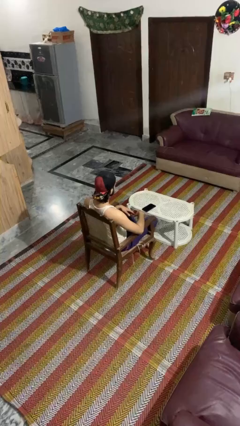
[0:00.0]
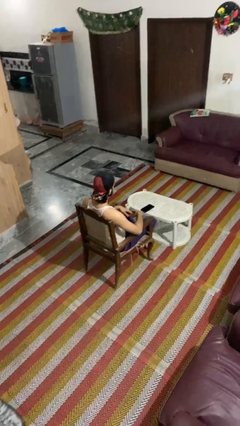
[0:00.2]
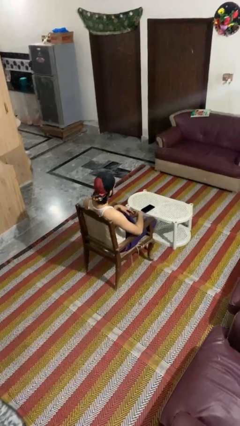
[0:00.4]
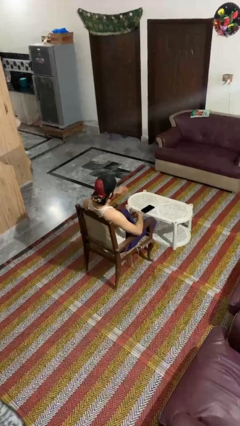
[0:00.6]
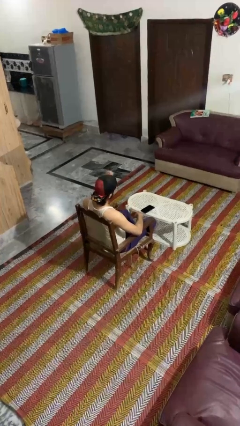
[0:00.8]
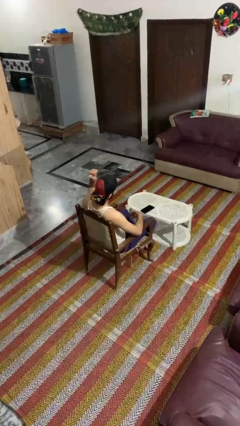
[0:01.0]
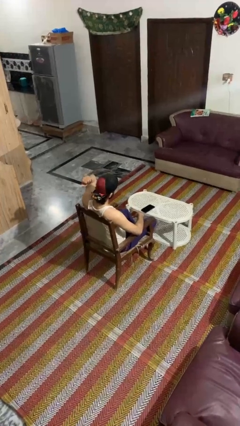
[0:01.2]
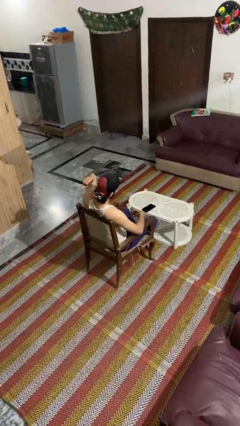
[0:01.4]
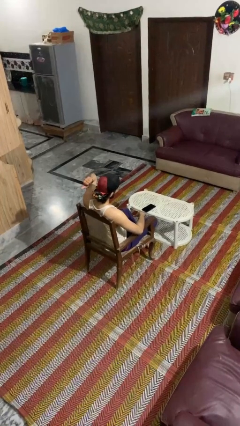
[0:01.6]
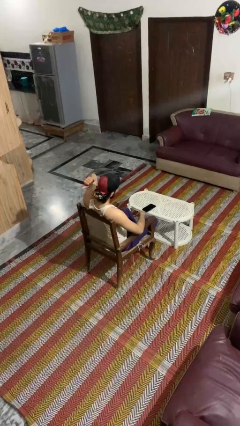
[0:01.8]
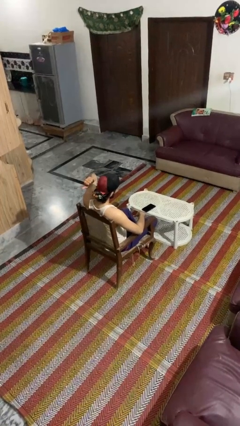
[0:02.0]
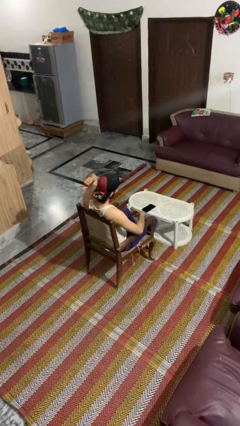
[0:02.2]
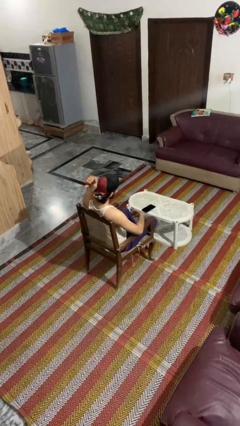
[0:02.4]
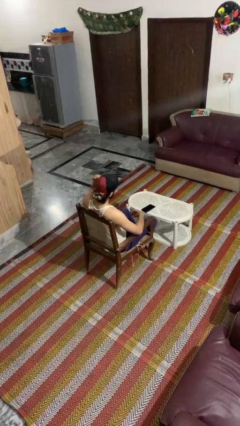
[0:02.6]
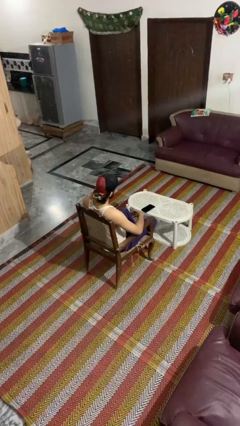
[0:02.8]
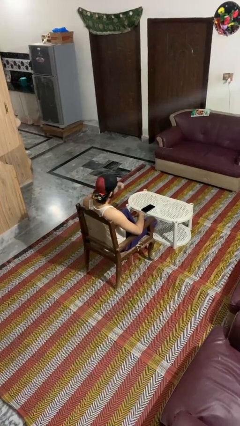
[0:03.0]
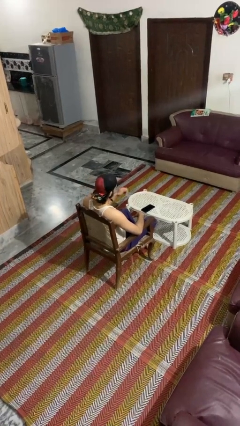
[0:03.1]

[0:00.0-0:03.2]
person gestures behind me

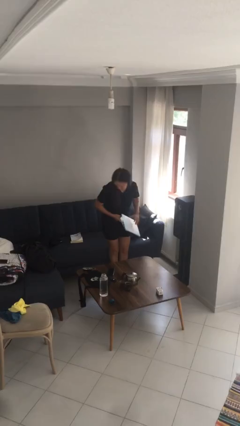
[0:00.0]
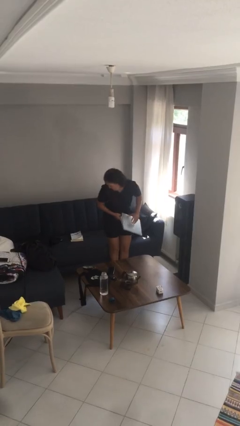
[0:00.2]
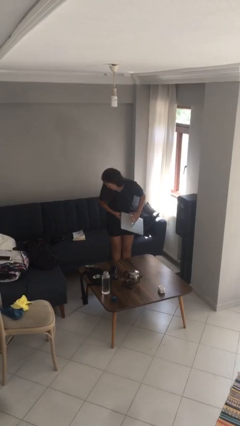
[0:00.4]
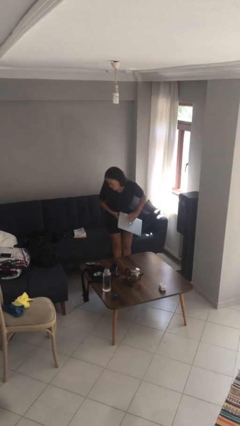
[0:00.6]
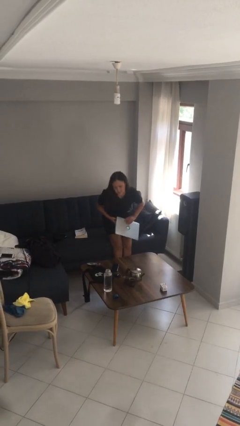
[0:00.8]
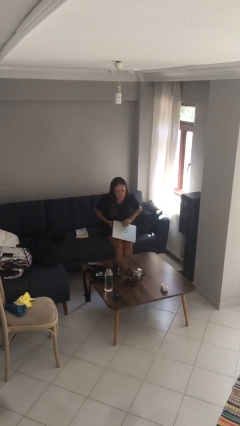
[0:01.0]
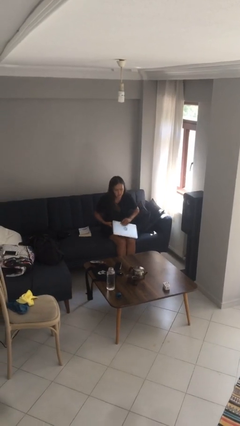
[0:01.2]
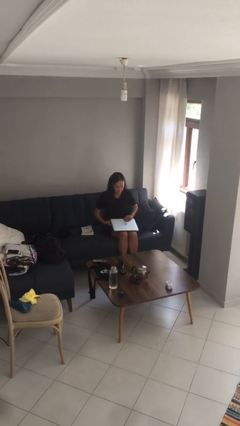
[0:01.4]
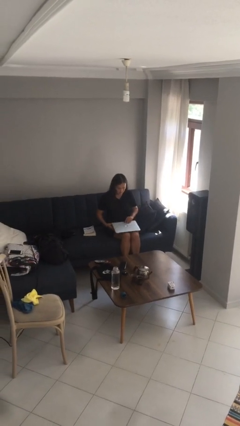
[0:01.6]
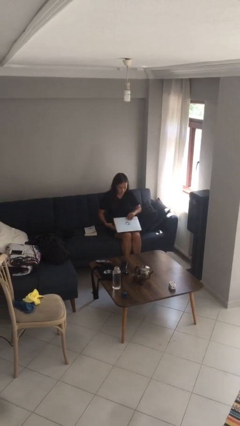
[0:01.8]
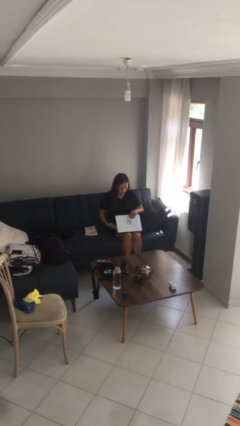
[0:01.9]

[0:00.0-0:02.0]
person sits down

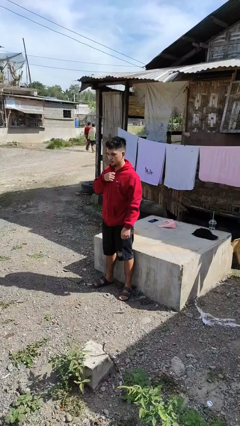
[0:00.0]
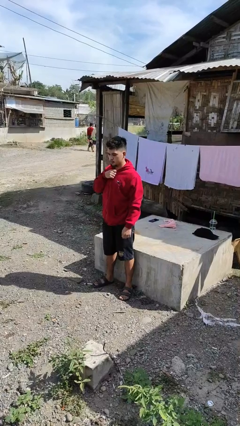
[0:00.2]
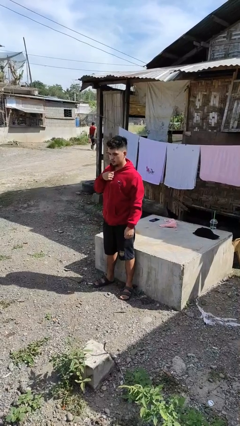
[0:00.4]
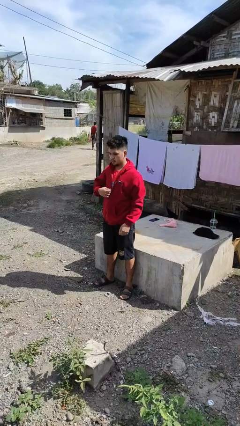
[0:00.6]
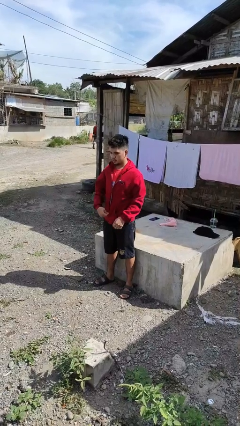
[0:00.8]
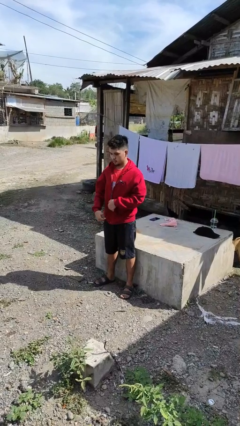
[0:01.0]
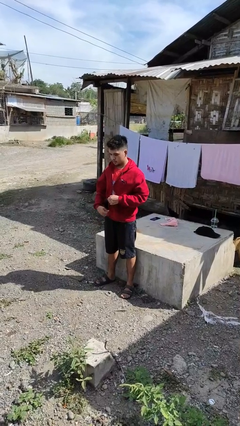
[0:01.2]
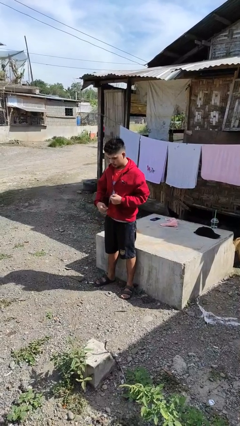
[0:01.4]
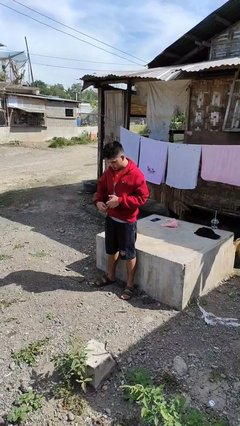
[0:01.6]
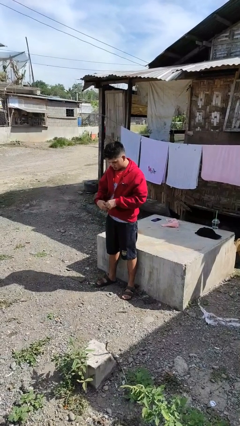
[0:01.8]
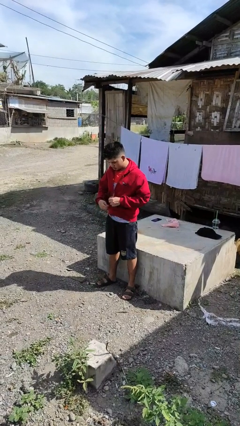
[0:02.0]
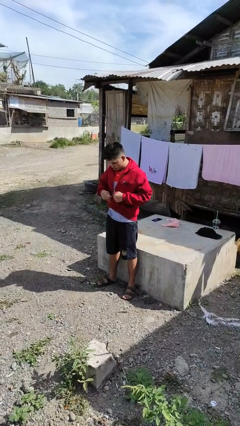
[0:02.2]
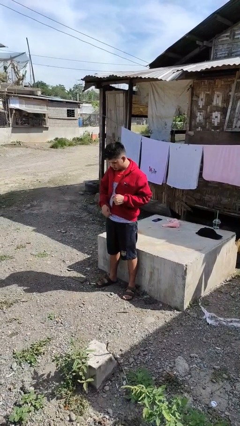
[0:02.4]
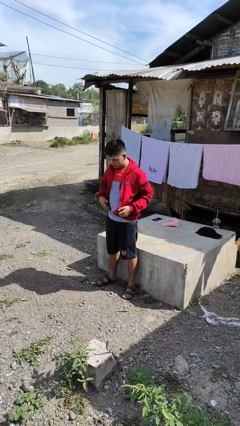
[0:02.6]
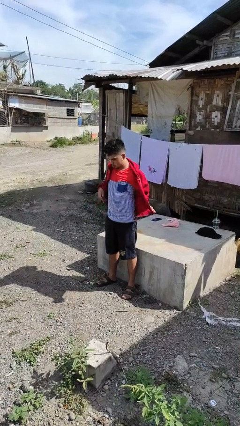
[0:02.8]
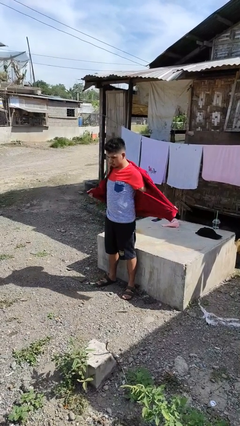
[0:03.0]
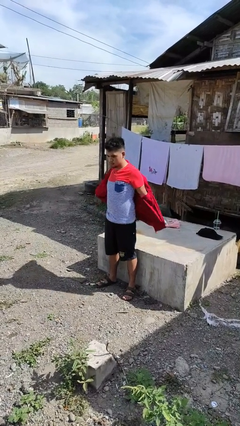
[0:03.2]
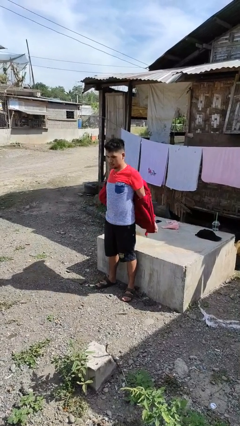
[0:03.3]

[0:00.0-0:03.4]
person unzips jacket

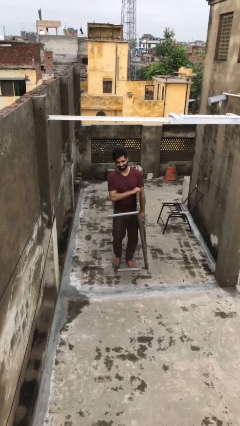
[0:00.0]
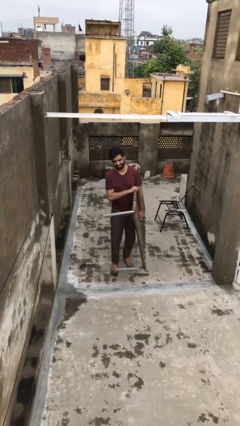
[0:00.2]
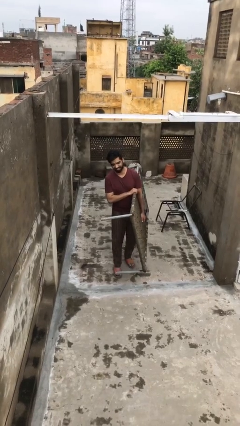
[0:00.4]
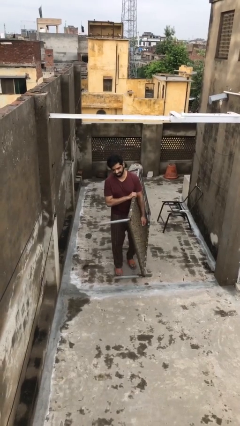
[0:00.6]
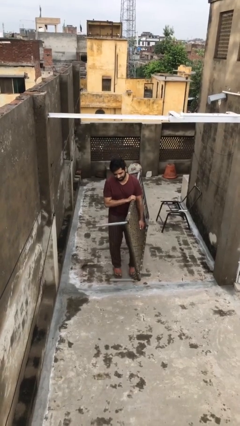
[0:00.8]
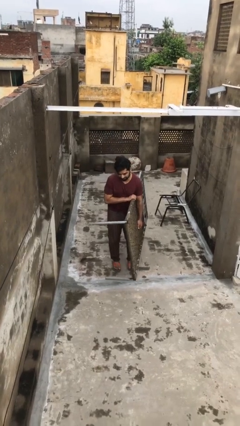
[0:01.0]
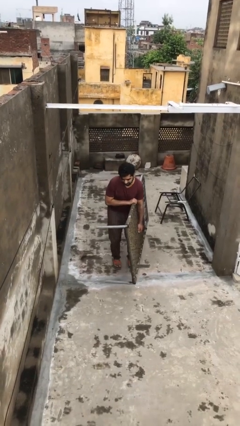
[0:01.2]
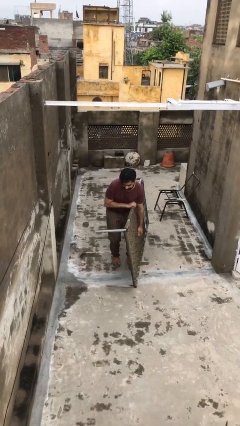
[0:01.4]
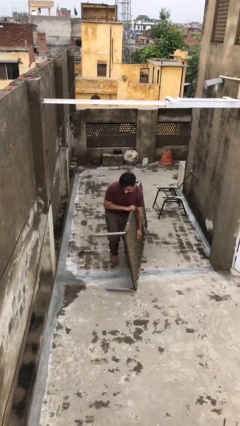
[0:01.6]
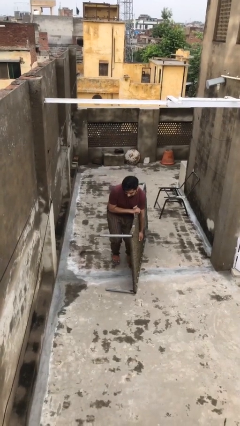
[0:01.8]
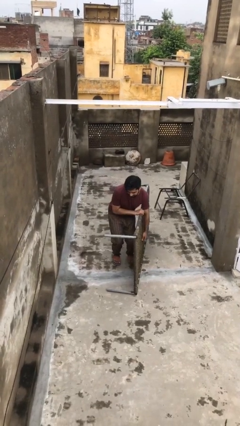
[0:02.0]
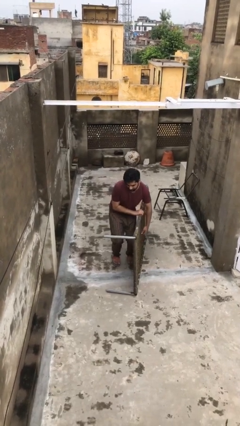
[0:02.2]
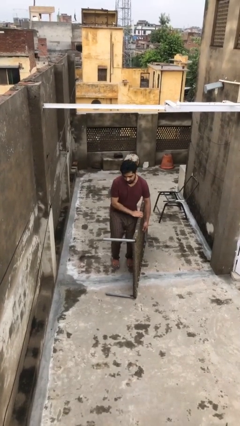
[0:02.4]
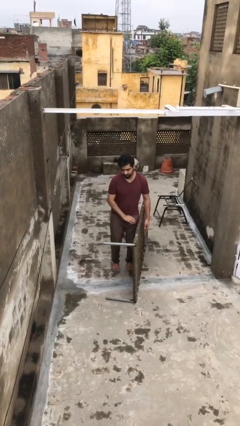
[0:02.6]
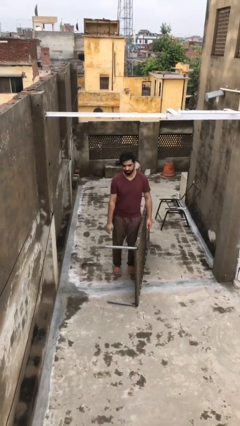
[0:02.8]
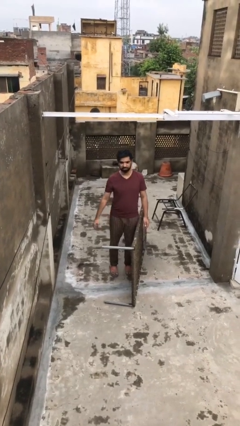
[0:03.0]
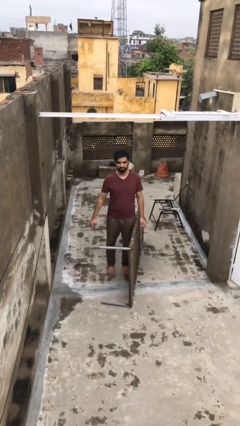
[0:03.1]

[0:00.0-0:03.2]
person puts down object on floor

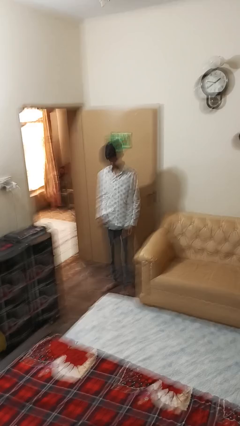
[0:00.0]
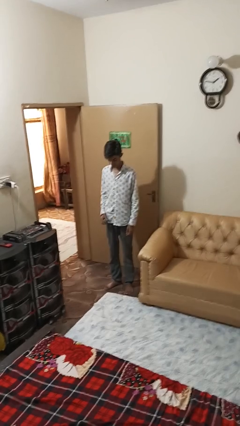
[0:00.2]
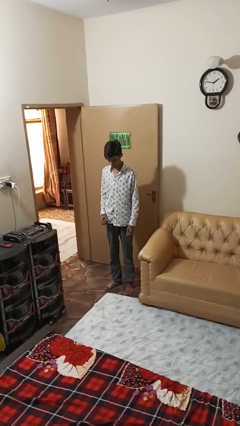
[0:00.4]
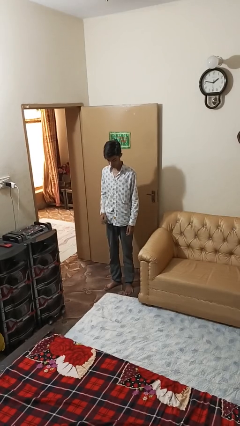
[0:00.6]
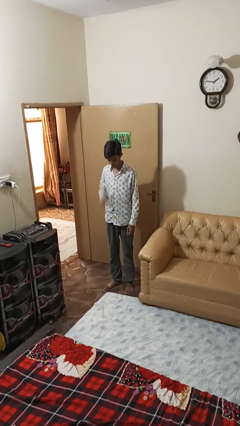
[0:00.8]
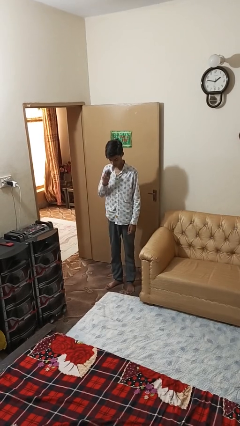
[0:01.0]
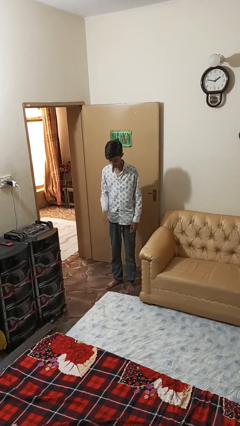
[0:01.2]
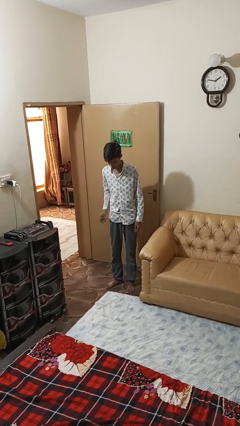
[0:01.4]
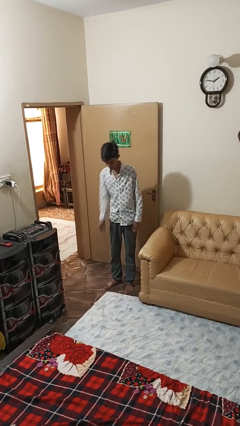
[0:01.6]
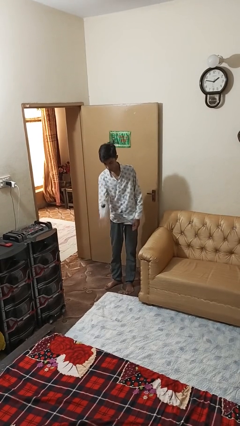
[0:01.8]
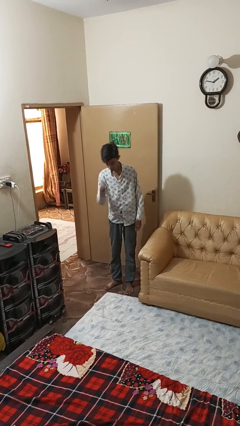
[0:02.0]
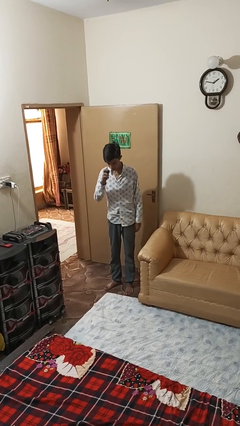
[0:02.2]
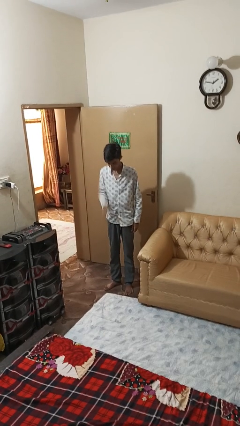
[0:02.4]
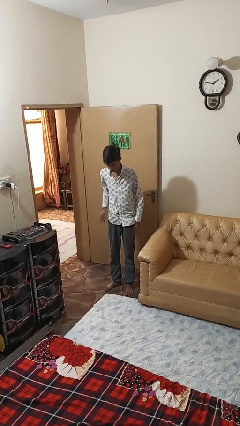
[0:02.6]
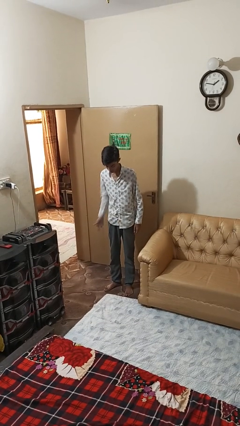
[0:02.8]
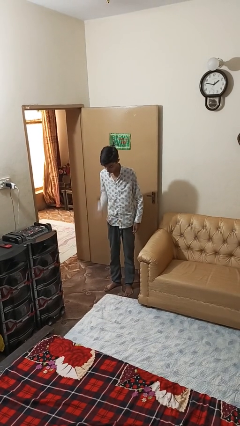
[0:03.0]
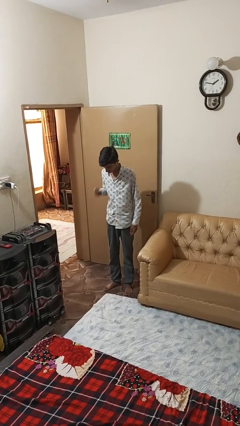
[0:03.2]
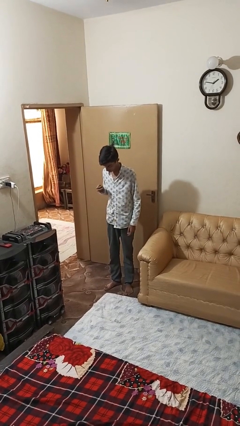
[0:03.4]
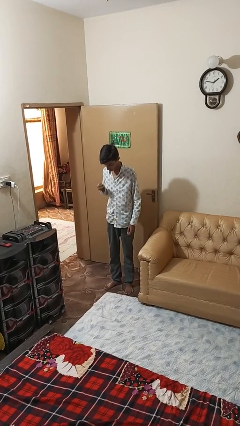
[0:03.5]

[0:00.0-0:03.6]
person bounces ball on floor

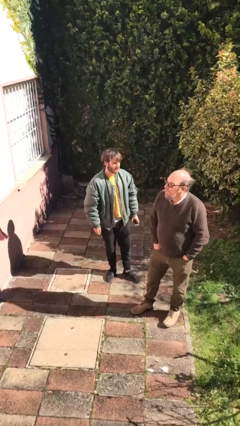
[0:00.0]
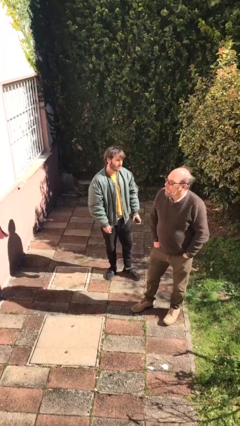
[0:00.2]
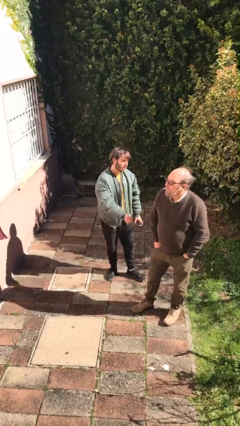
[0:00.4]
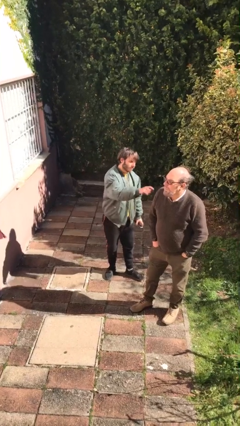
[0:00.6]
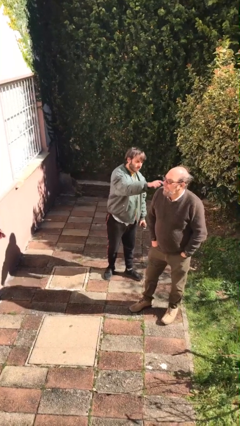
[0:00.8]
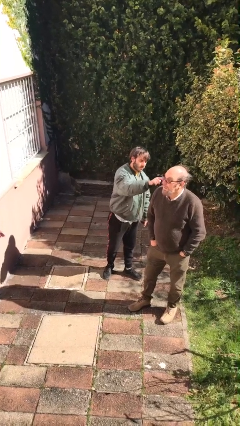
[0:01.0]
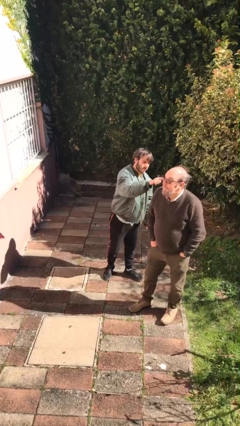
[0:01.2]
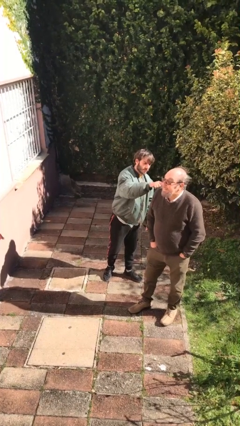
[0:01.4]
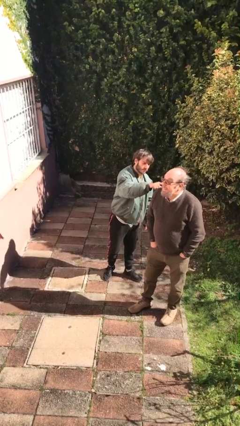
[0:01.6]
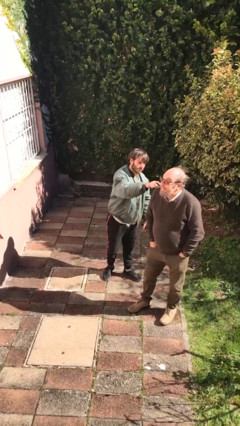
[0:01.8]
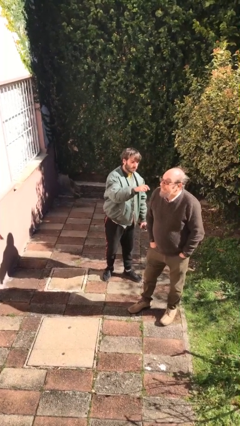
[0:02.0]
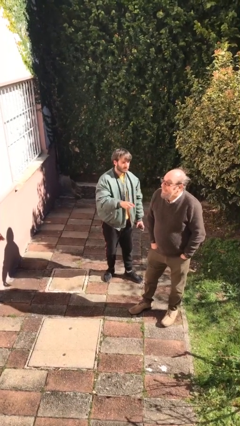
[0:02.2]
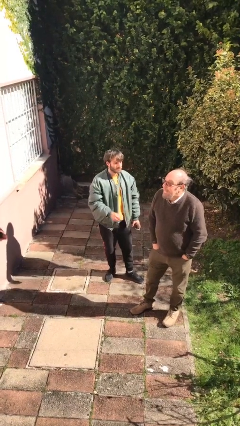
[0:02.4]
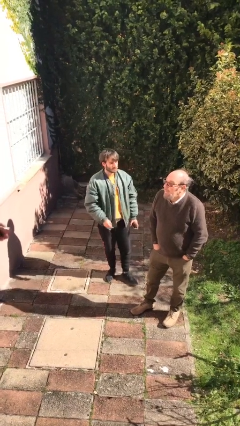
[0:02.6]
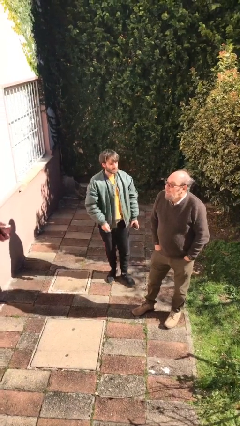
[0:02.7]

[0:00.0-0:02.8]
person touches back of person
